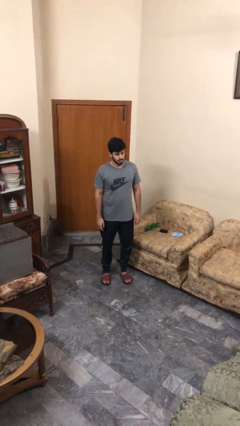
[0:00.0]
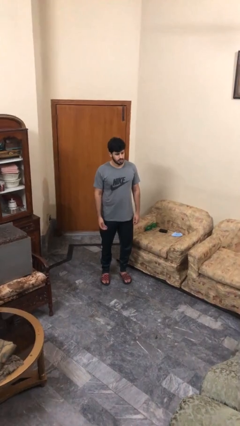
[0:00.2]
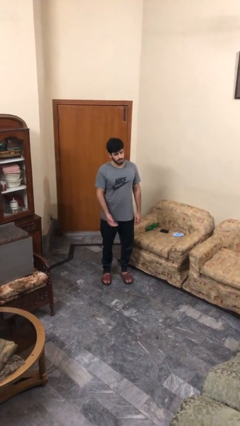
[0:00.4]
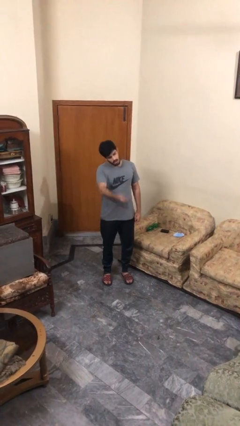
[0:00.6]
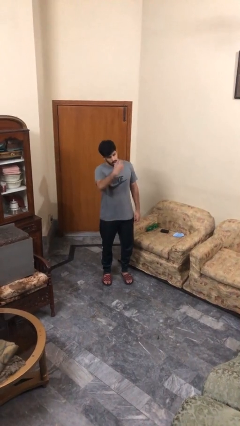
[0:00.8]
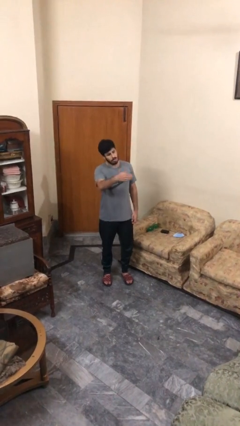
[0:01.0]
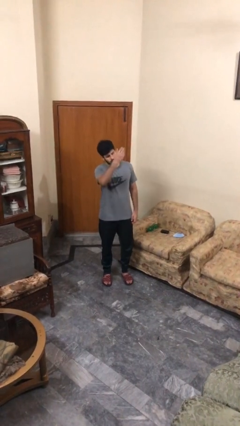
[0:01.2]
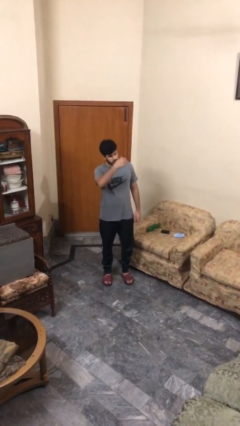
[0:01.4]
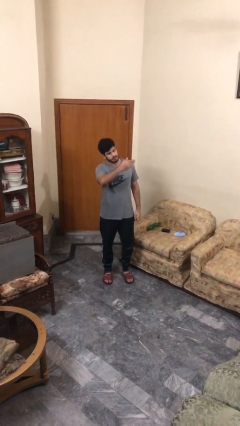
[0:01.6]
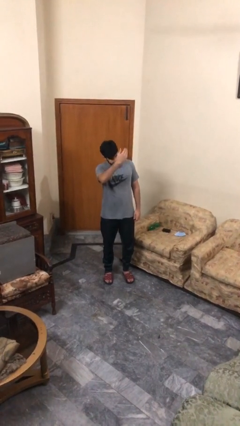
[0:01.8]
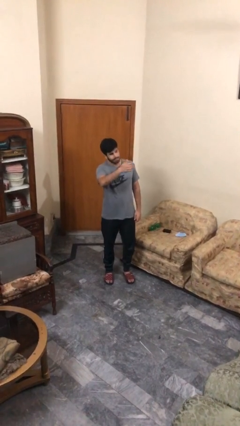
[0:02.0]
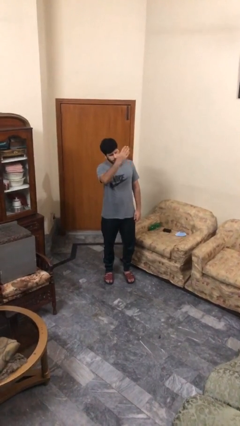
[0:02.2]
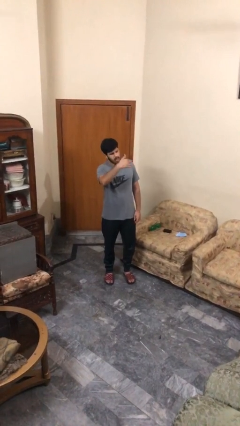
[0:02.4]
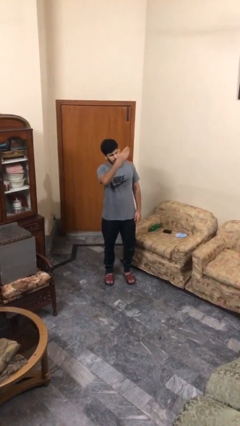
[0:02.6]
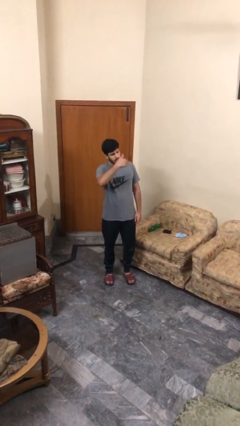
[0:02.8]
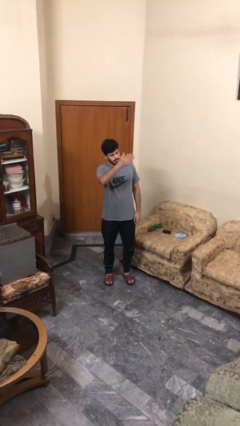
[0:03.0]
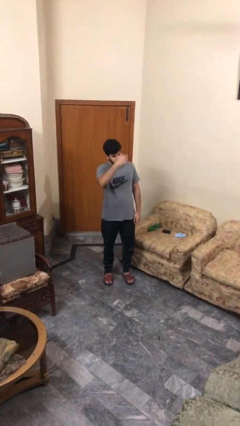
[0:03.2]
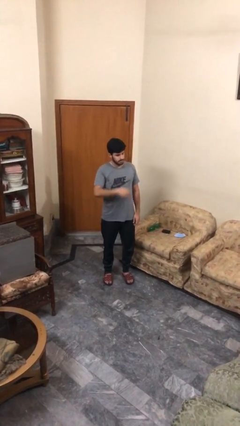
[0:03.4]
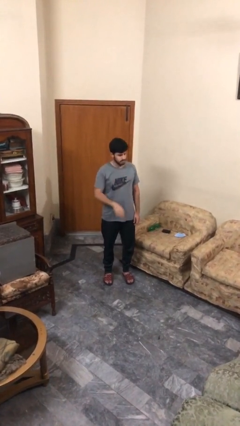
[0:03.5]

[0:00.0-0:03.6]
person gestures come here

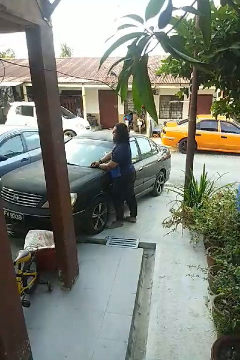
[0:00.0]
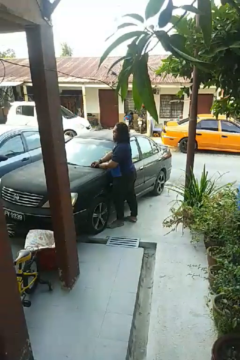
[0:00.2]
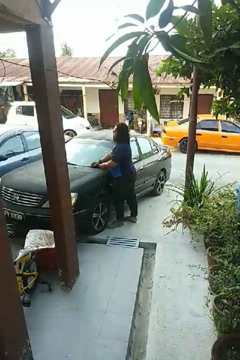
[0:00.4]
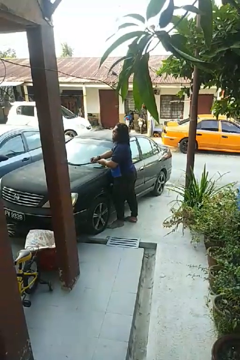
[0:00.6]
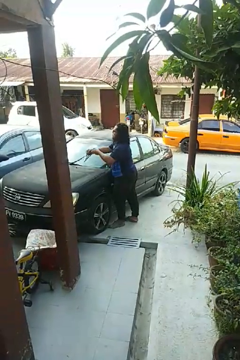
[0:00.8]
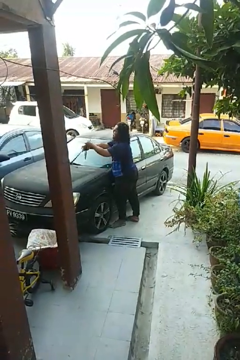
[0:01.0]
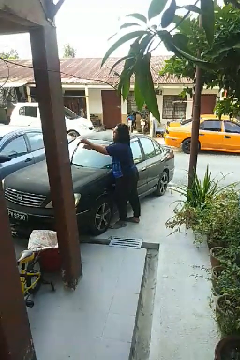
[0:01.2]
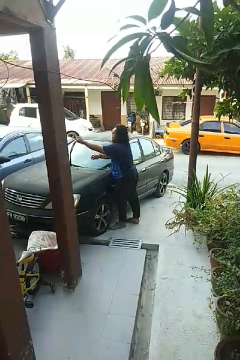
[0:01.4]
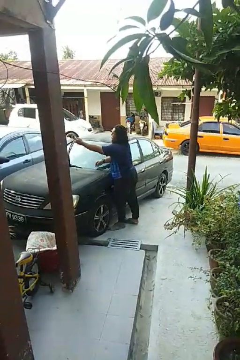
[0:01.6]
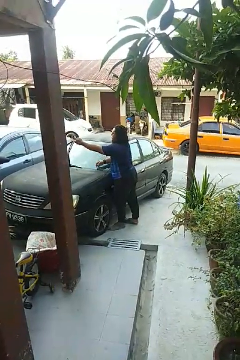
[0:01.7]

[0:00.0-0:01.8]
person flips up car wipers

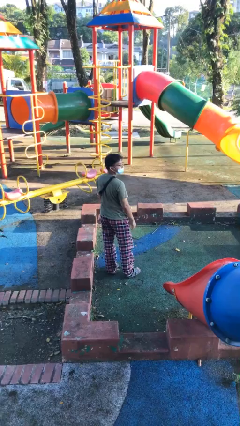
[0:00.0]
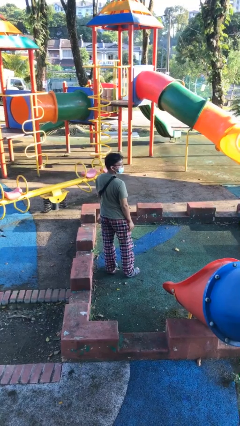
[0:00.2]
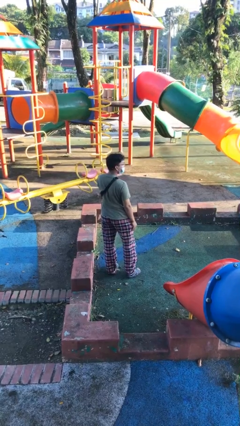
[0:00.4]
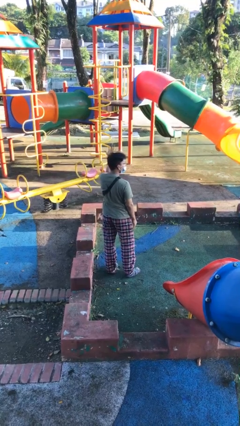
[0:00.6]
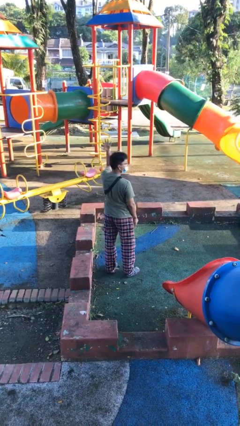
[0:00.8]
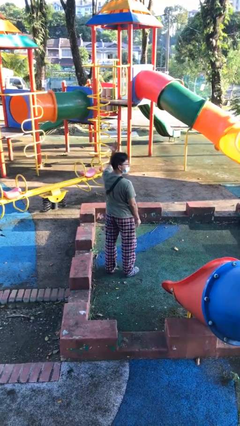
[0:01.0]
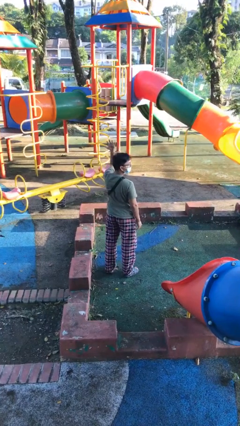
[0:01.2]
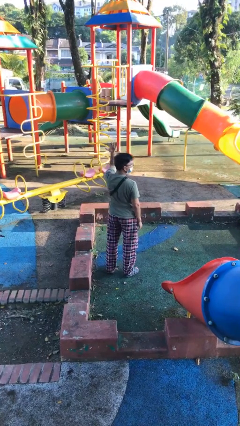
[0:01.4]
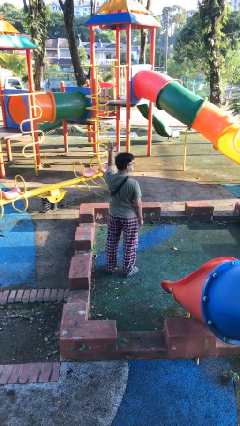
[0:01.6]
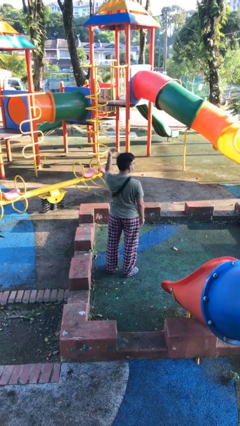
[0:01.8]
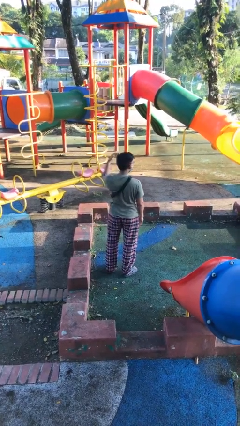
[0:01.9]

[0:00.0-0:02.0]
person gestures number five

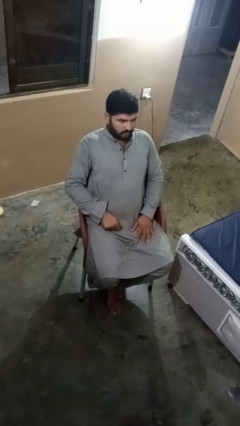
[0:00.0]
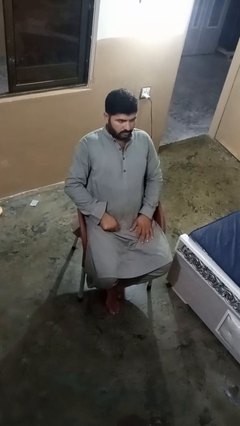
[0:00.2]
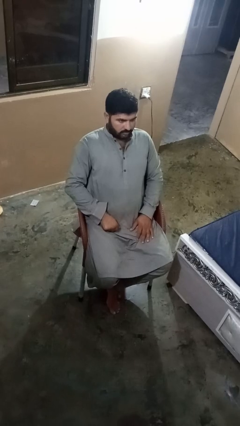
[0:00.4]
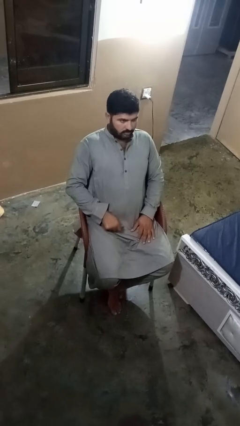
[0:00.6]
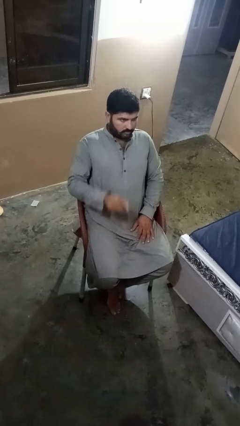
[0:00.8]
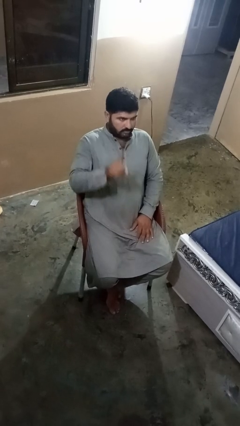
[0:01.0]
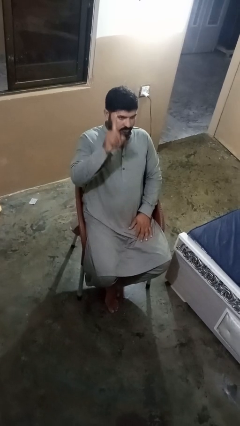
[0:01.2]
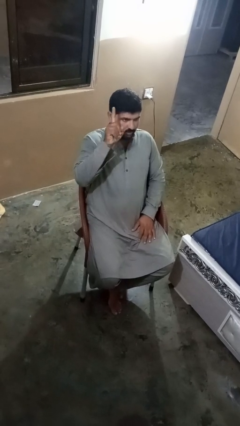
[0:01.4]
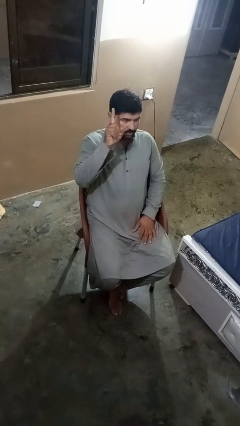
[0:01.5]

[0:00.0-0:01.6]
person gestures number one

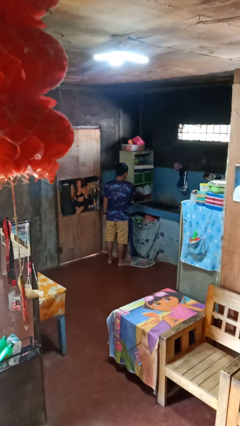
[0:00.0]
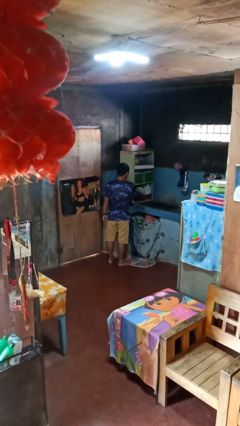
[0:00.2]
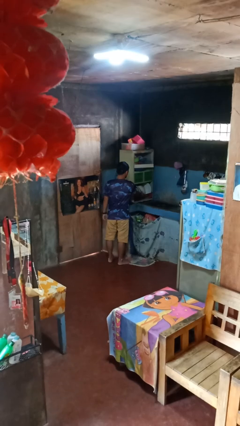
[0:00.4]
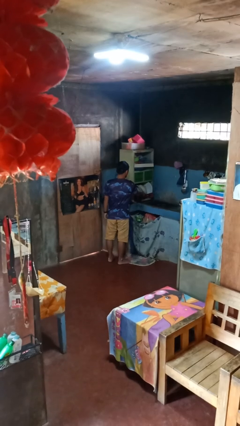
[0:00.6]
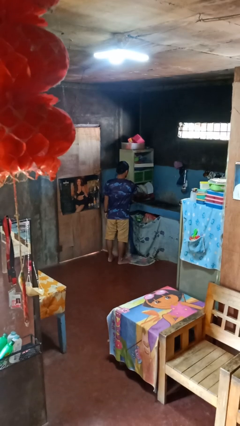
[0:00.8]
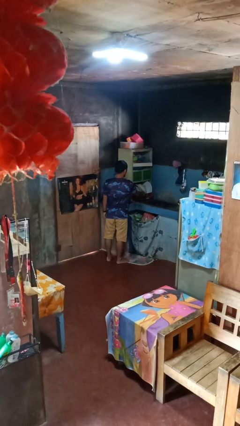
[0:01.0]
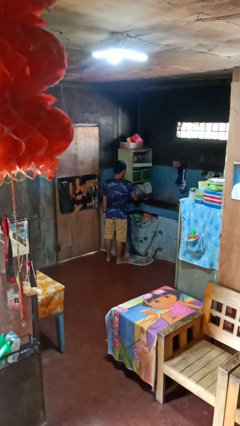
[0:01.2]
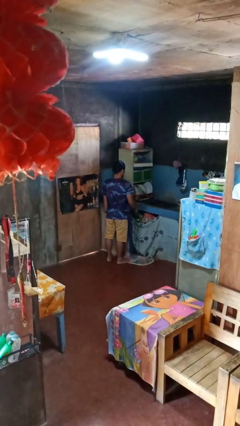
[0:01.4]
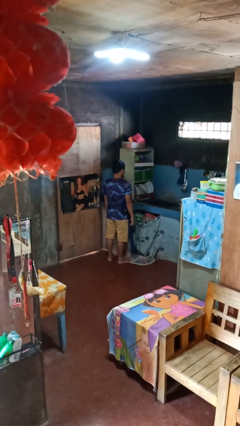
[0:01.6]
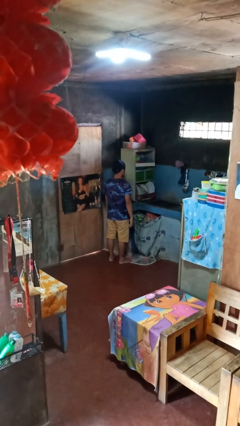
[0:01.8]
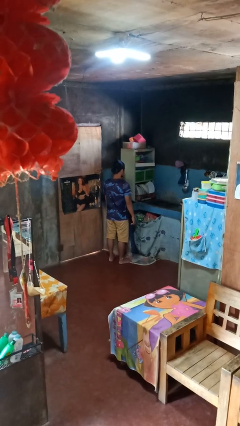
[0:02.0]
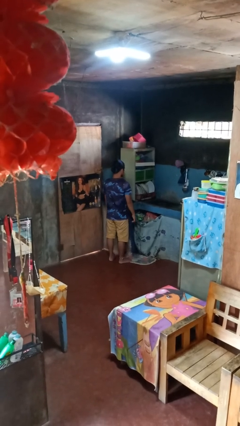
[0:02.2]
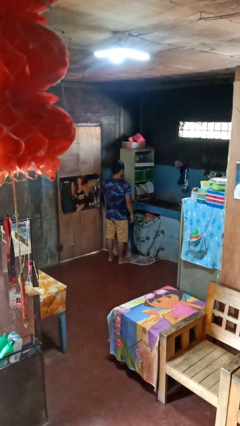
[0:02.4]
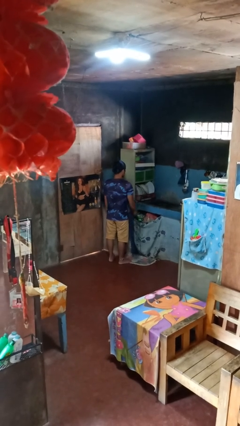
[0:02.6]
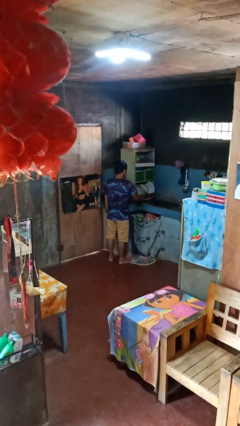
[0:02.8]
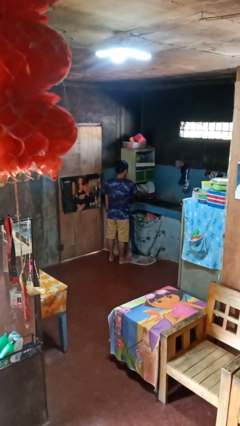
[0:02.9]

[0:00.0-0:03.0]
person opens dishwasher

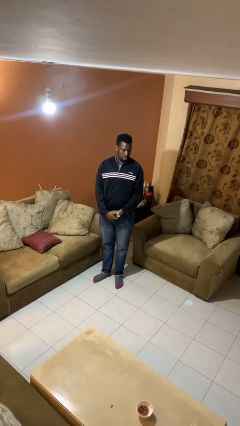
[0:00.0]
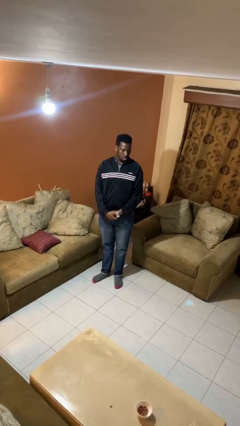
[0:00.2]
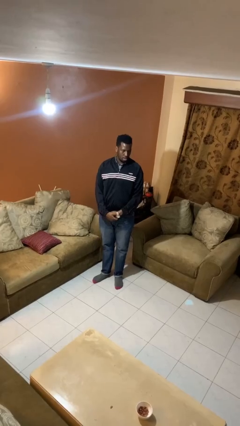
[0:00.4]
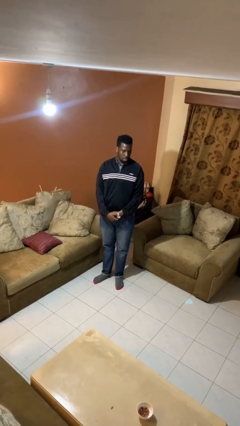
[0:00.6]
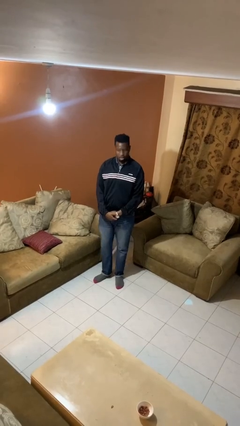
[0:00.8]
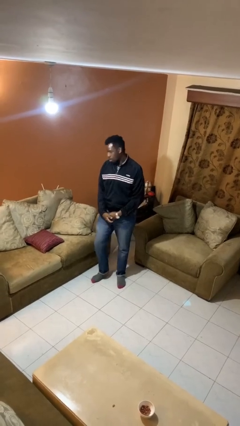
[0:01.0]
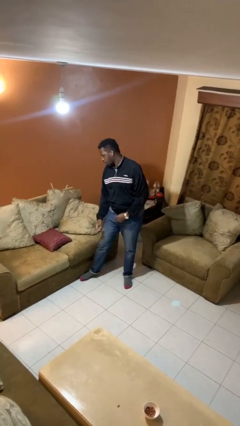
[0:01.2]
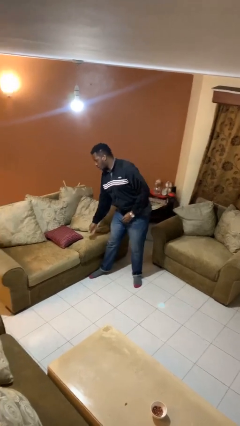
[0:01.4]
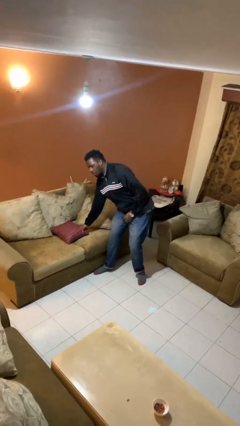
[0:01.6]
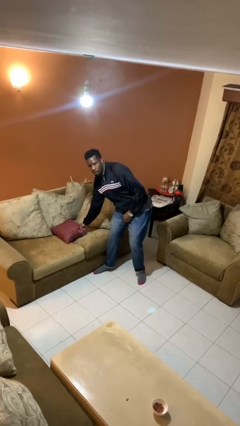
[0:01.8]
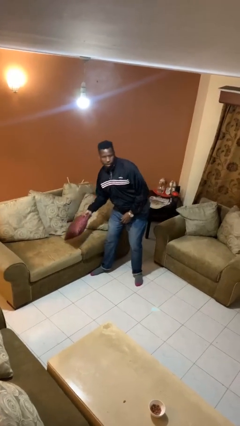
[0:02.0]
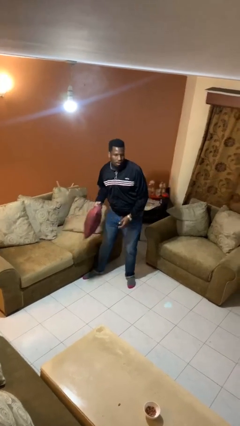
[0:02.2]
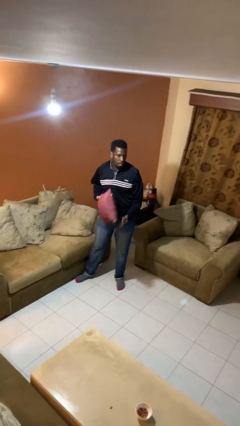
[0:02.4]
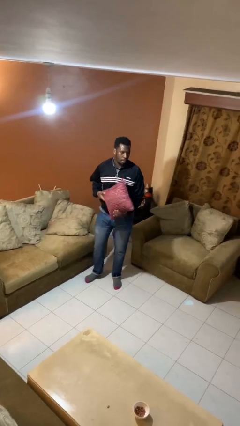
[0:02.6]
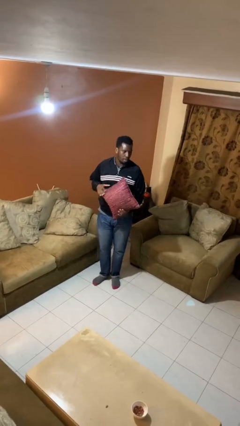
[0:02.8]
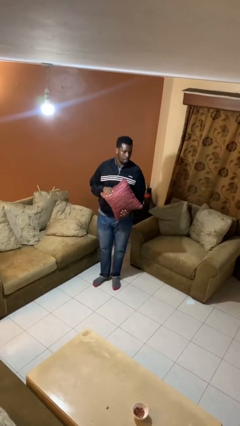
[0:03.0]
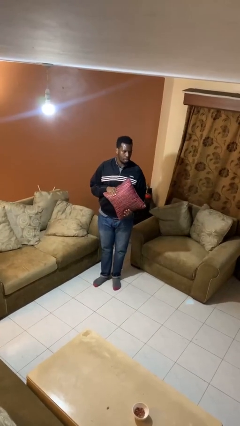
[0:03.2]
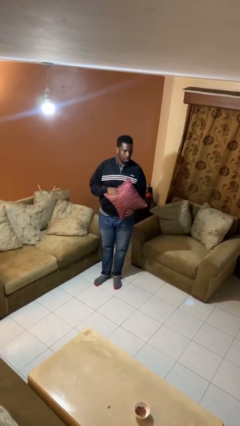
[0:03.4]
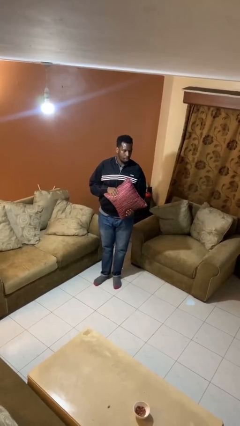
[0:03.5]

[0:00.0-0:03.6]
person picks up object from couch

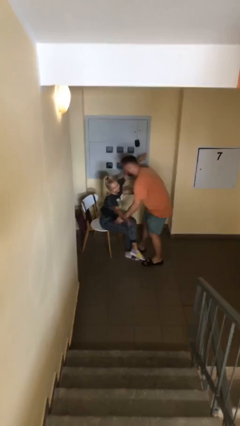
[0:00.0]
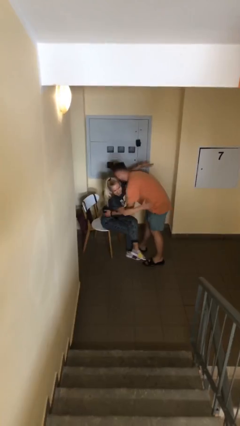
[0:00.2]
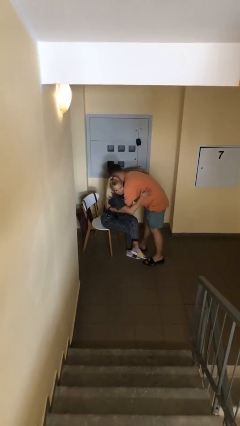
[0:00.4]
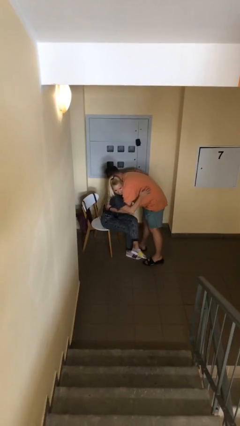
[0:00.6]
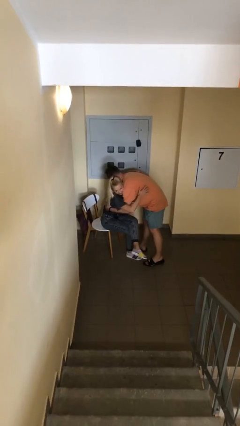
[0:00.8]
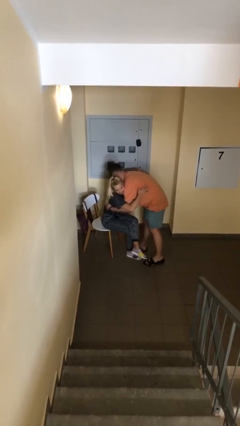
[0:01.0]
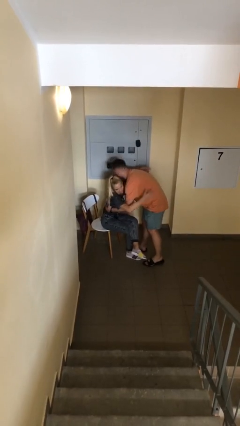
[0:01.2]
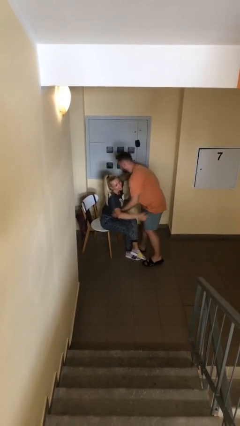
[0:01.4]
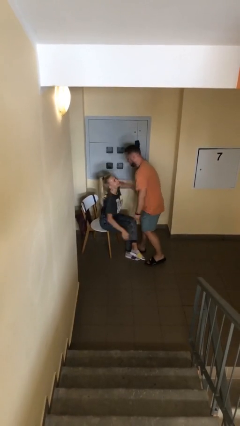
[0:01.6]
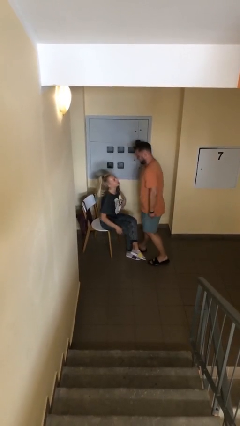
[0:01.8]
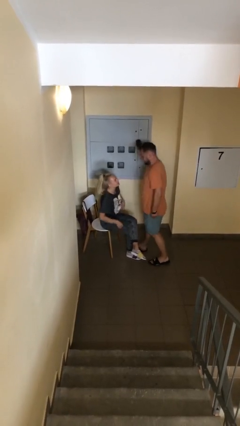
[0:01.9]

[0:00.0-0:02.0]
person embraces person
